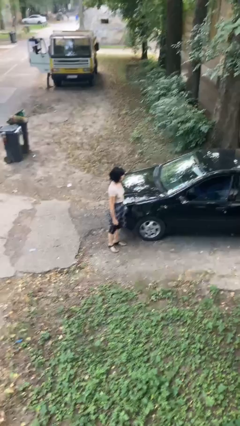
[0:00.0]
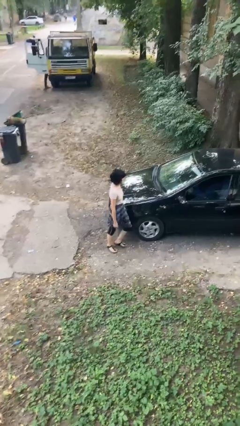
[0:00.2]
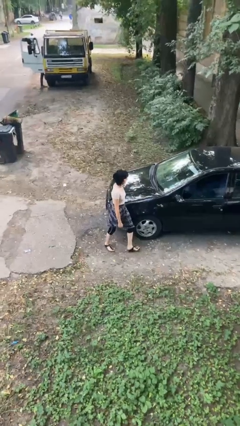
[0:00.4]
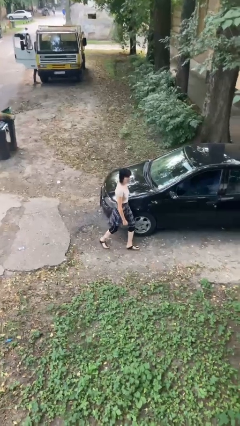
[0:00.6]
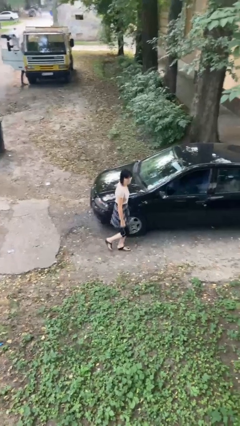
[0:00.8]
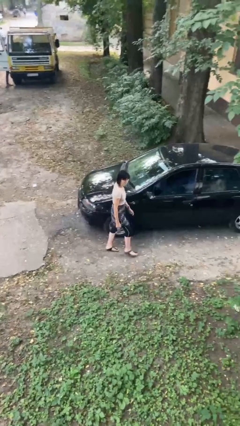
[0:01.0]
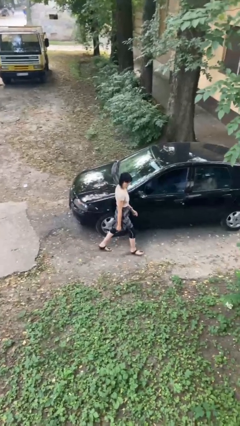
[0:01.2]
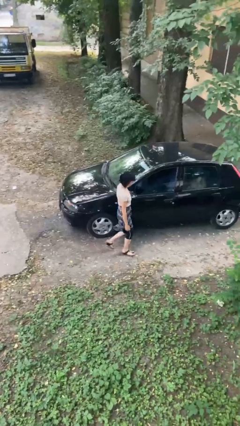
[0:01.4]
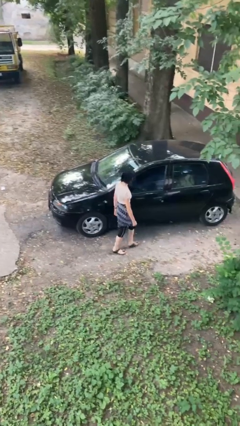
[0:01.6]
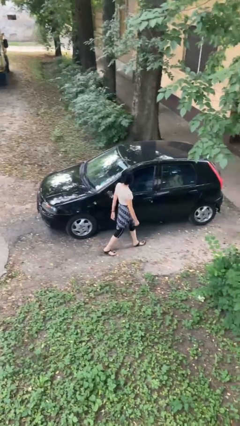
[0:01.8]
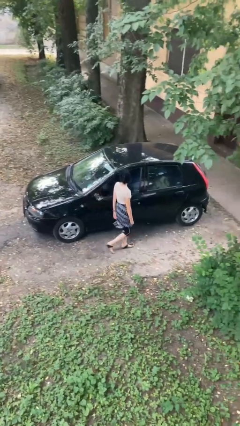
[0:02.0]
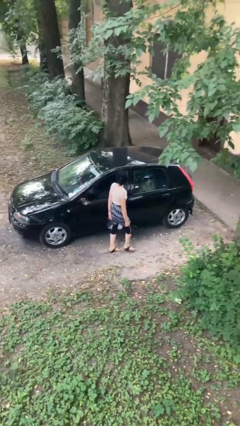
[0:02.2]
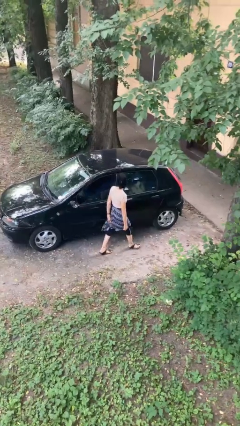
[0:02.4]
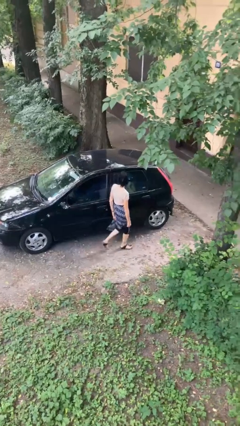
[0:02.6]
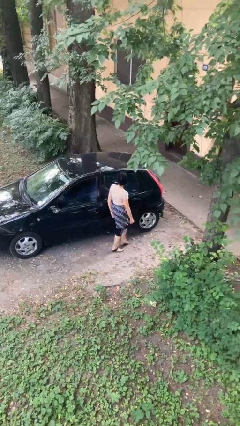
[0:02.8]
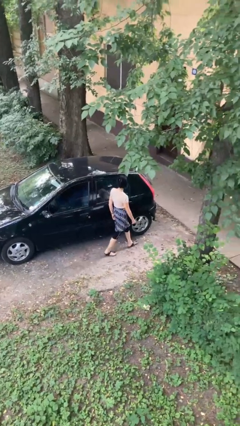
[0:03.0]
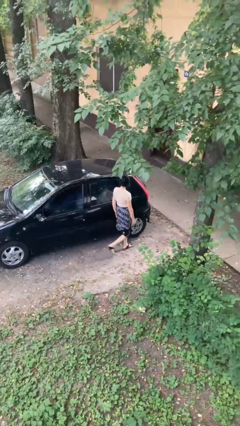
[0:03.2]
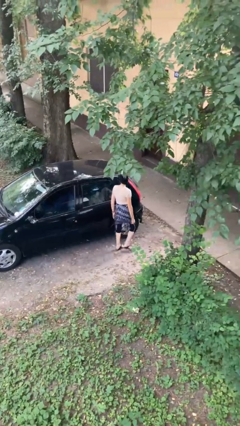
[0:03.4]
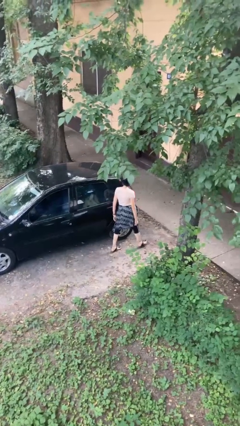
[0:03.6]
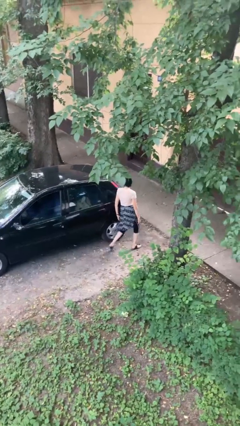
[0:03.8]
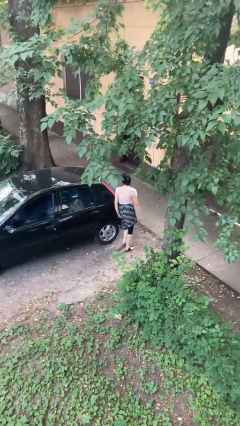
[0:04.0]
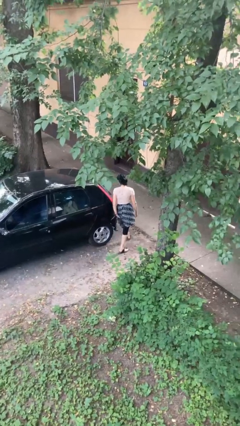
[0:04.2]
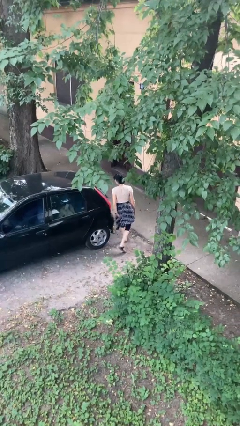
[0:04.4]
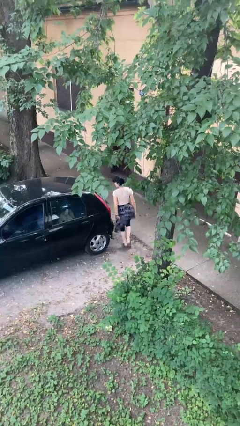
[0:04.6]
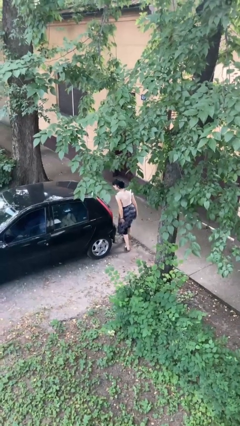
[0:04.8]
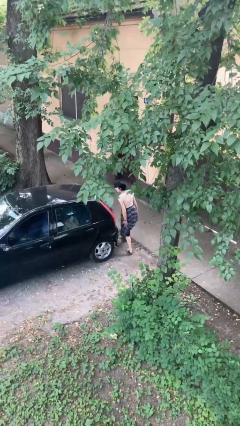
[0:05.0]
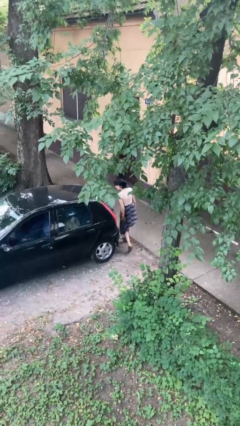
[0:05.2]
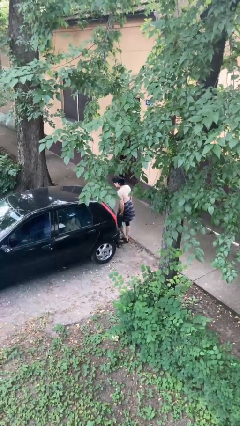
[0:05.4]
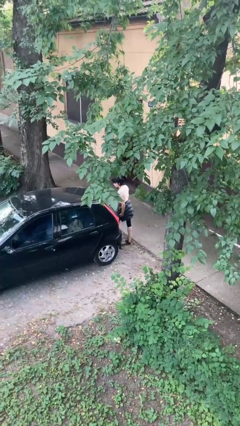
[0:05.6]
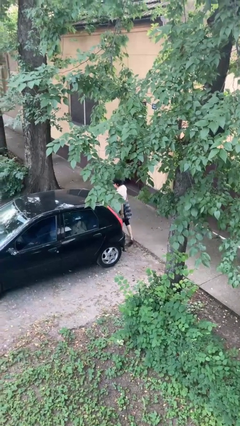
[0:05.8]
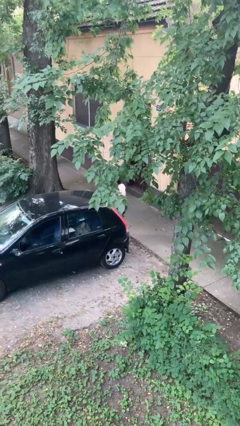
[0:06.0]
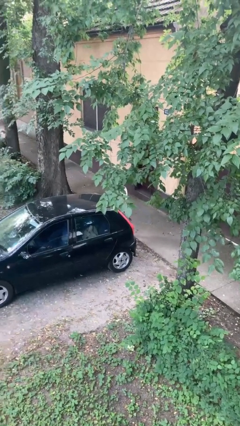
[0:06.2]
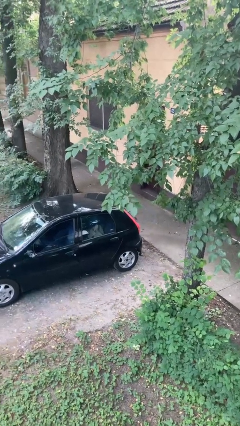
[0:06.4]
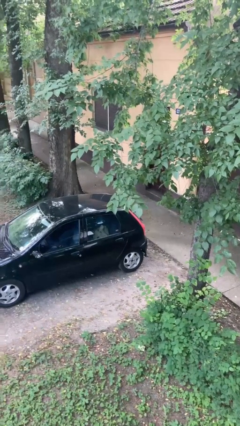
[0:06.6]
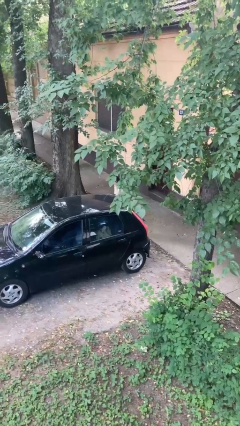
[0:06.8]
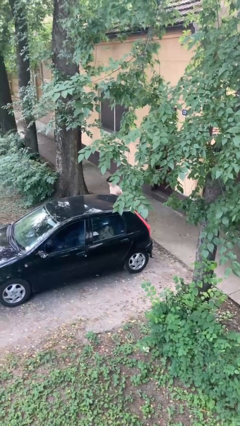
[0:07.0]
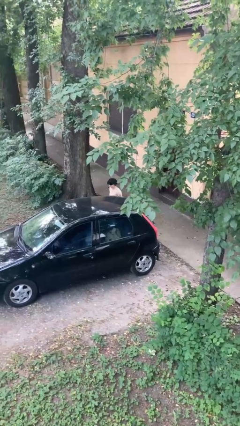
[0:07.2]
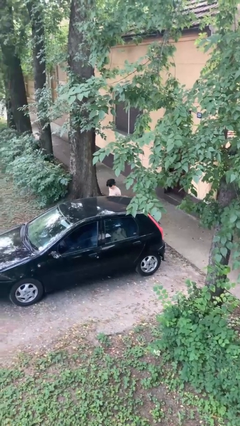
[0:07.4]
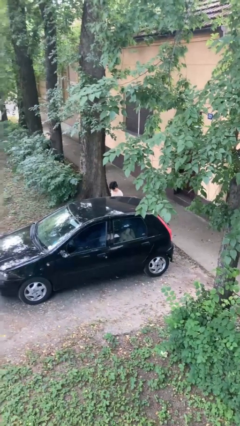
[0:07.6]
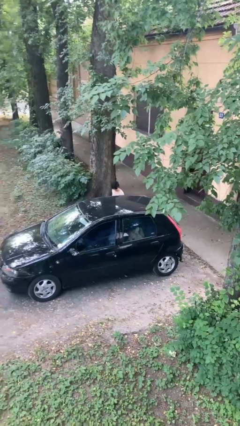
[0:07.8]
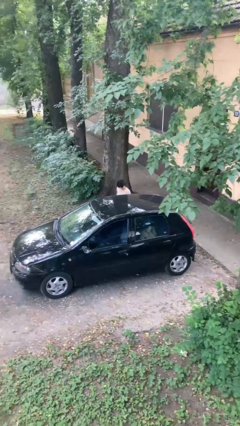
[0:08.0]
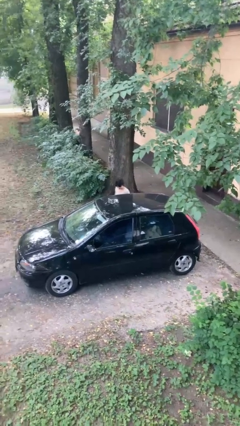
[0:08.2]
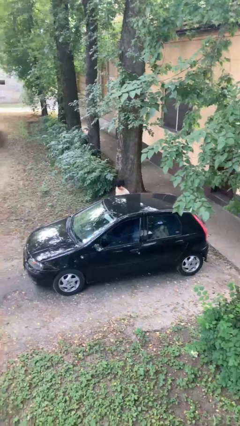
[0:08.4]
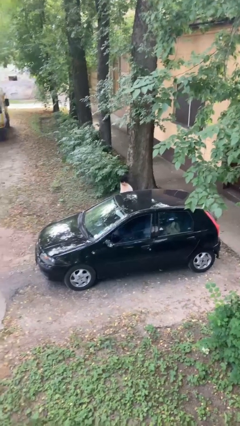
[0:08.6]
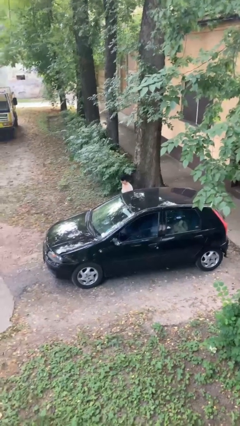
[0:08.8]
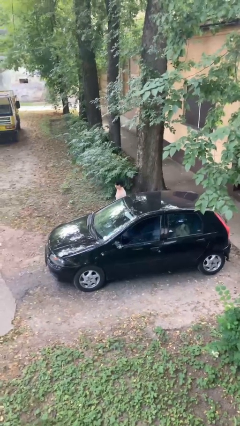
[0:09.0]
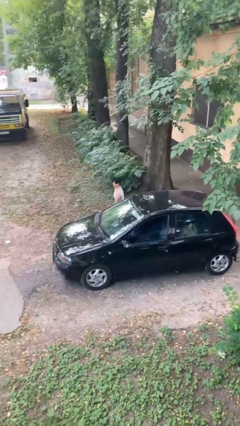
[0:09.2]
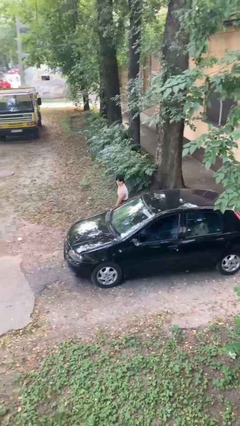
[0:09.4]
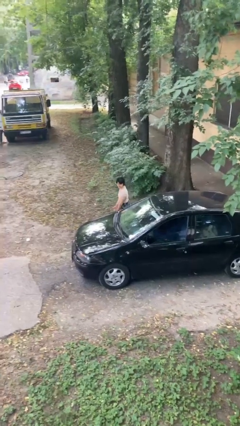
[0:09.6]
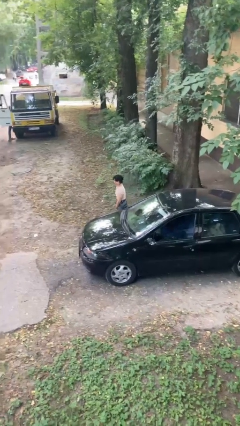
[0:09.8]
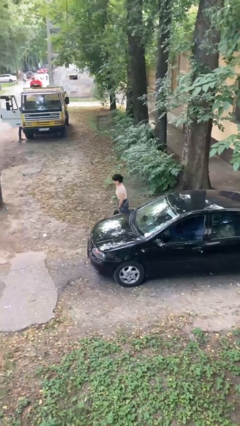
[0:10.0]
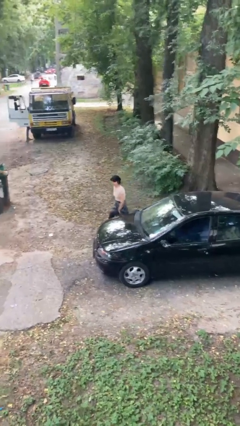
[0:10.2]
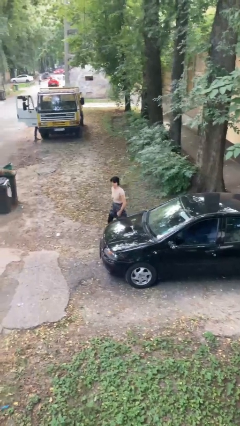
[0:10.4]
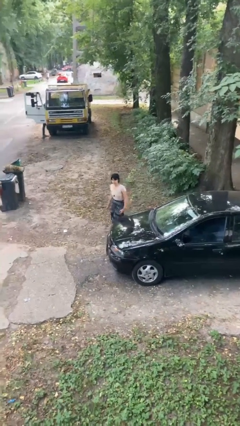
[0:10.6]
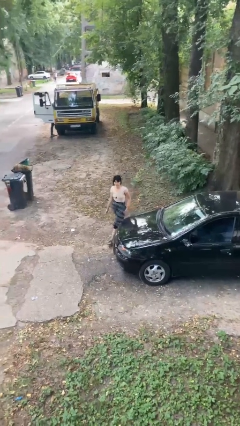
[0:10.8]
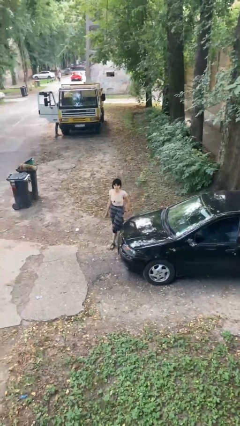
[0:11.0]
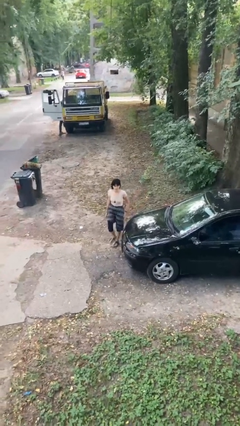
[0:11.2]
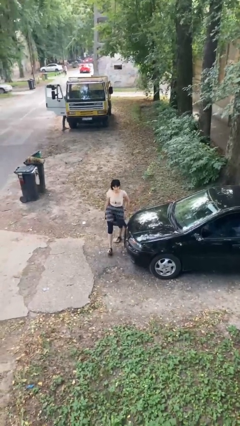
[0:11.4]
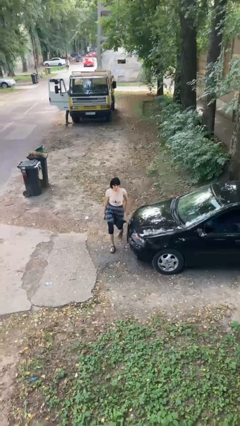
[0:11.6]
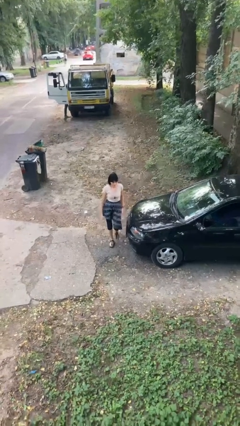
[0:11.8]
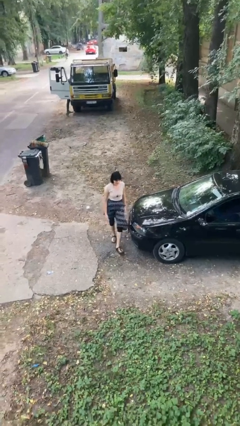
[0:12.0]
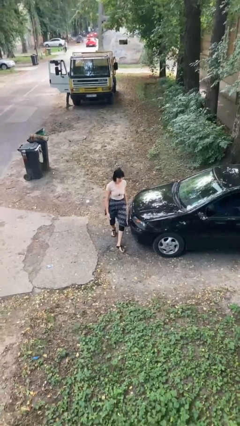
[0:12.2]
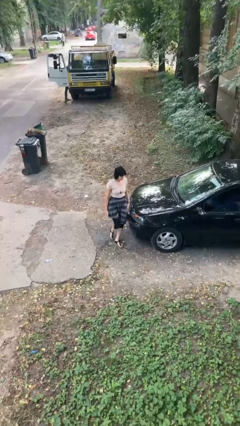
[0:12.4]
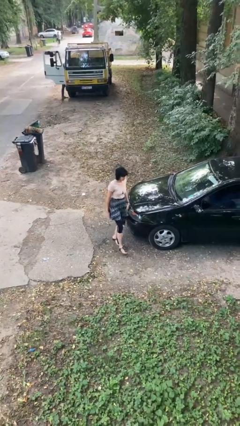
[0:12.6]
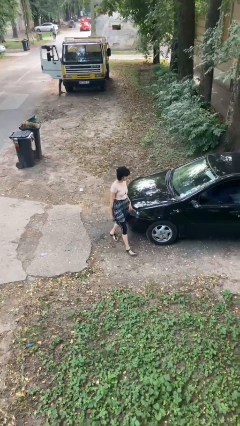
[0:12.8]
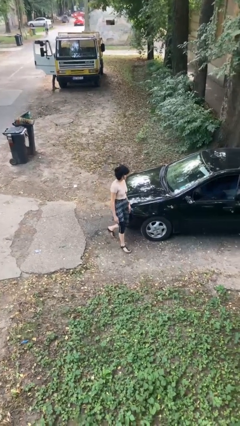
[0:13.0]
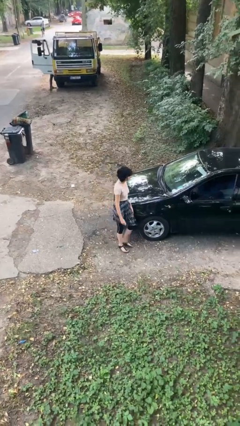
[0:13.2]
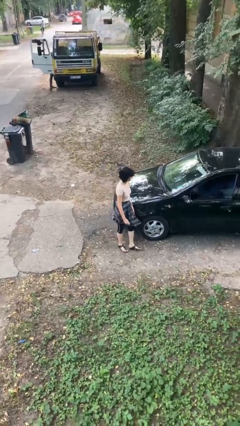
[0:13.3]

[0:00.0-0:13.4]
person walks around car

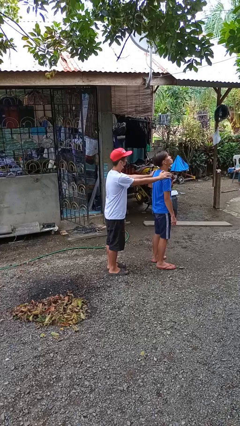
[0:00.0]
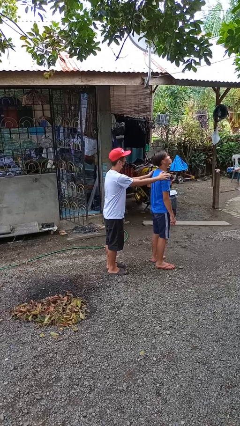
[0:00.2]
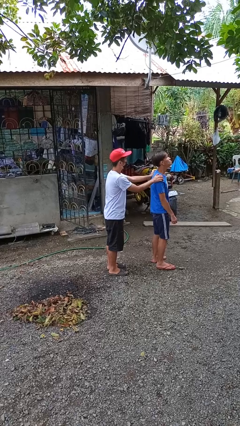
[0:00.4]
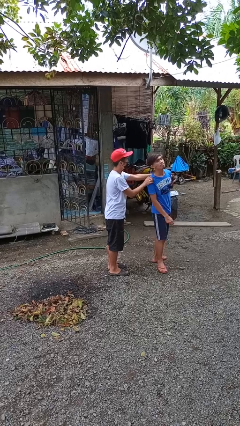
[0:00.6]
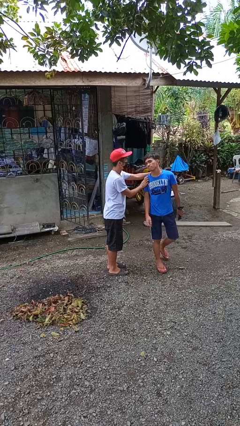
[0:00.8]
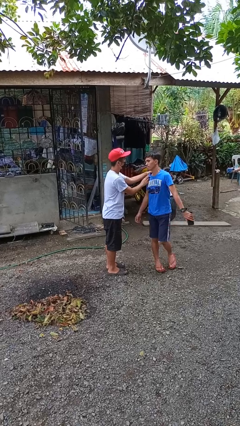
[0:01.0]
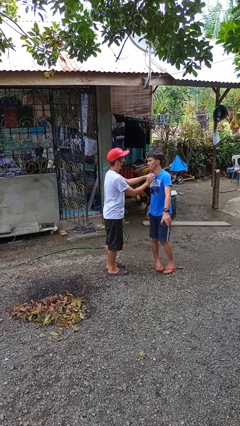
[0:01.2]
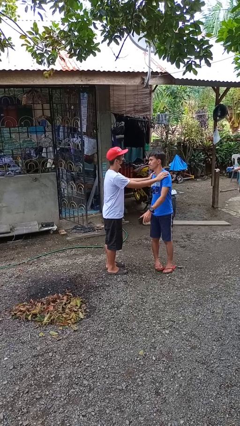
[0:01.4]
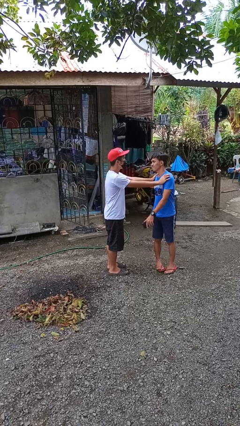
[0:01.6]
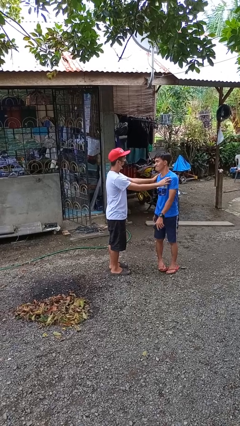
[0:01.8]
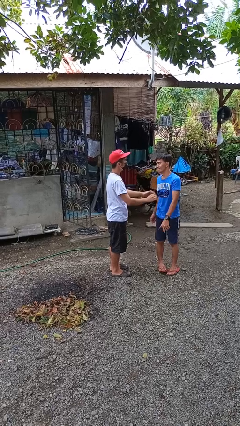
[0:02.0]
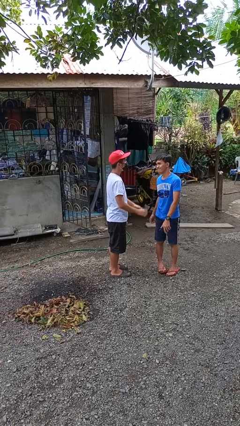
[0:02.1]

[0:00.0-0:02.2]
person spins person around

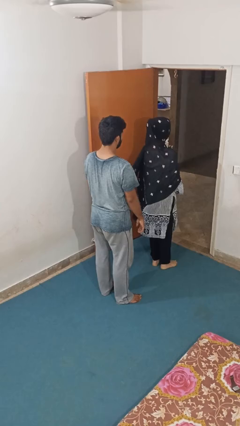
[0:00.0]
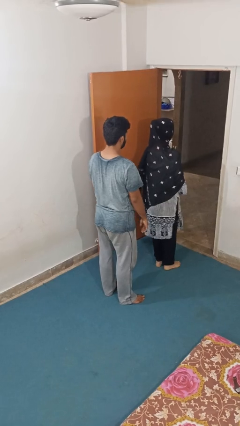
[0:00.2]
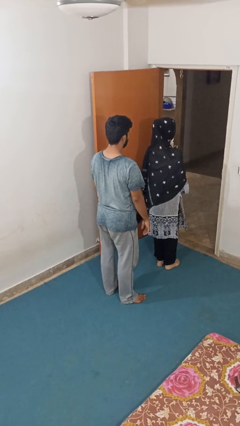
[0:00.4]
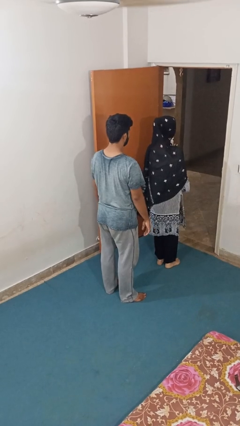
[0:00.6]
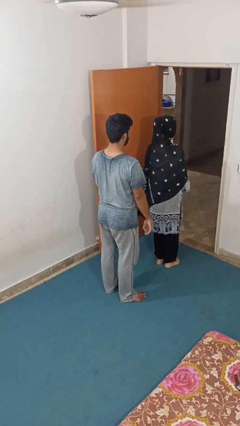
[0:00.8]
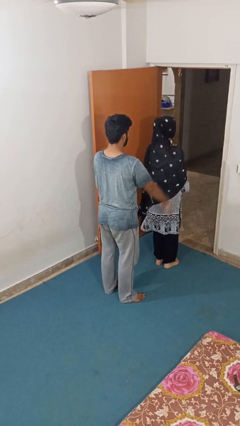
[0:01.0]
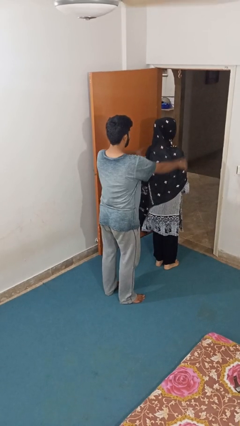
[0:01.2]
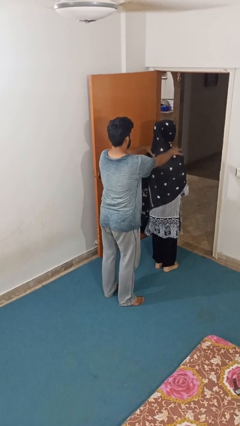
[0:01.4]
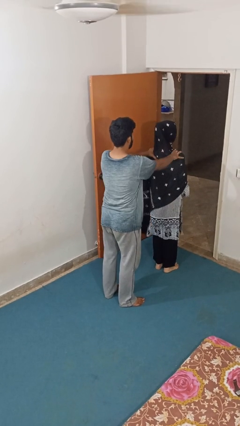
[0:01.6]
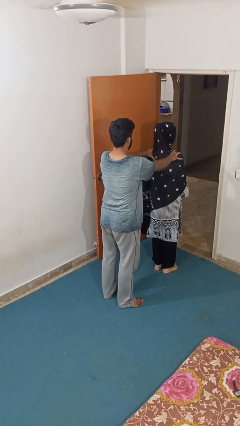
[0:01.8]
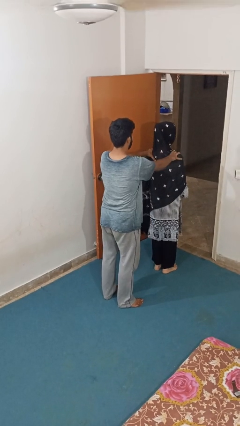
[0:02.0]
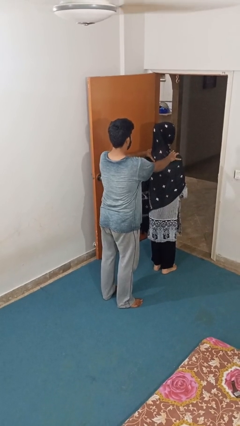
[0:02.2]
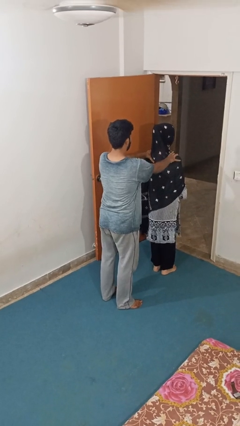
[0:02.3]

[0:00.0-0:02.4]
person grabs person by shoulder
